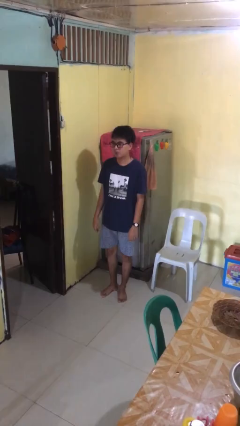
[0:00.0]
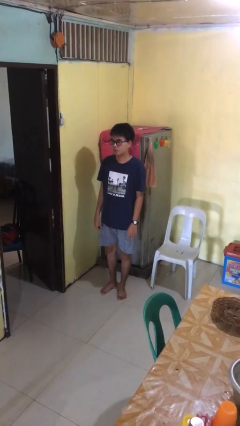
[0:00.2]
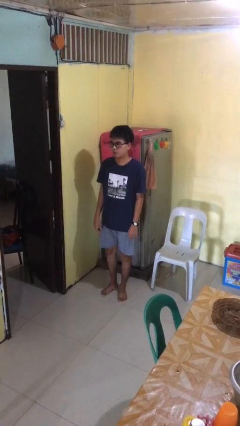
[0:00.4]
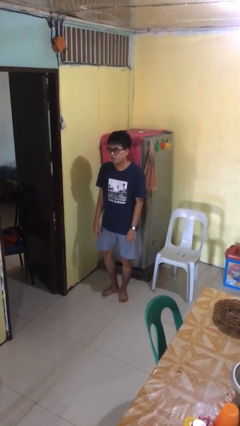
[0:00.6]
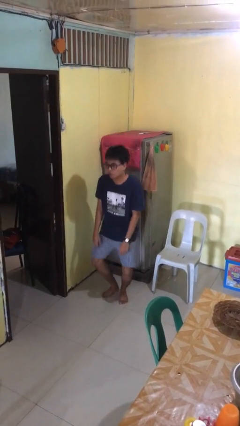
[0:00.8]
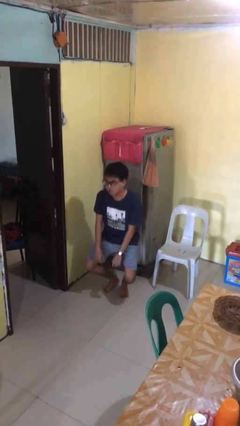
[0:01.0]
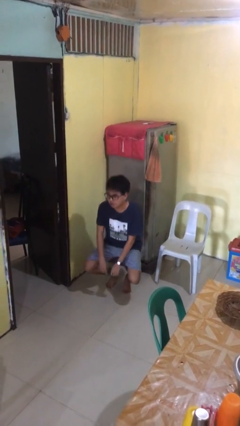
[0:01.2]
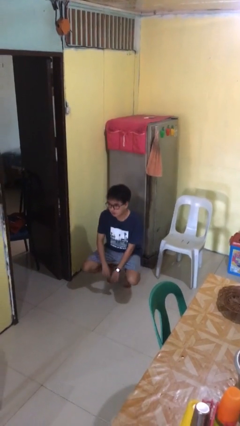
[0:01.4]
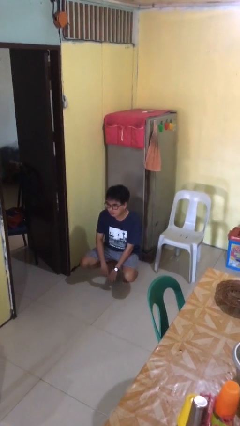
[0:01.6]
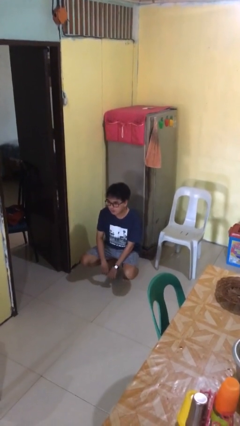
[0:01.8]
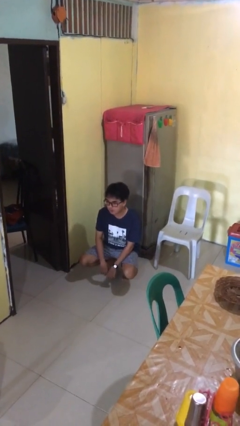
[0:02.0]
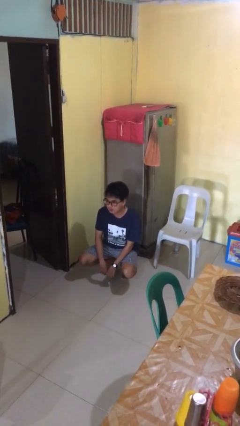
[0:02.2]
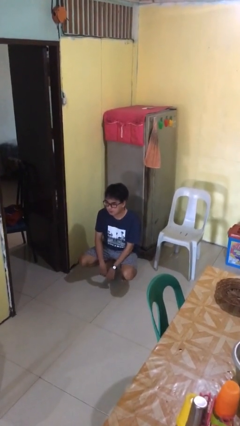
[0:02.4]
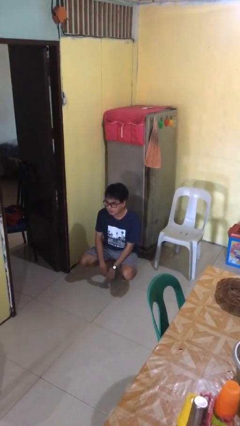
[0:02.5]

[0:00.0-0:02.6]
person squats

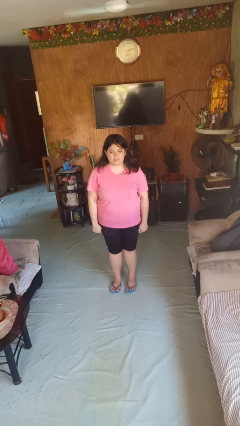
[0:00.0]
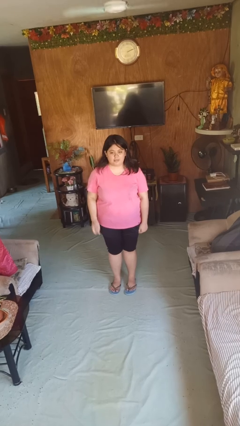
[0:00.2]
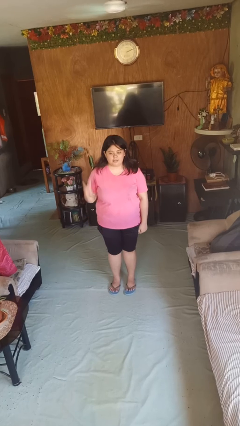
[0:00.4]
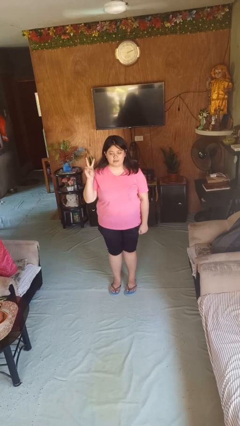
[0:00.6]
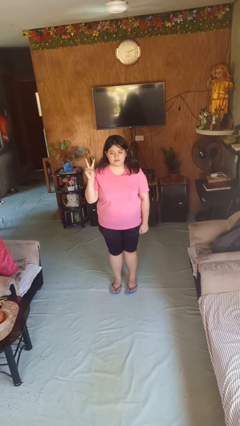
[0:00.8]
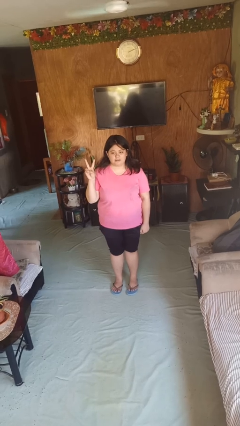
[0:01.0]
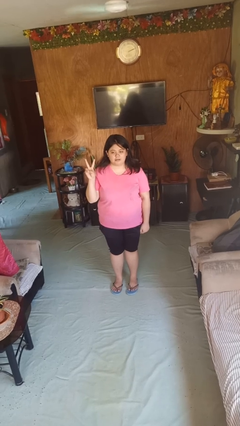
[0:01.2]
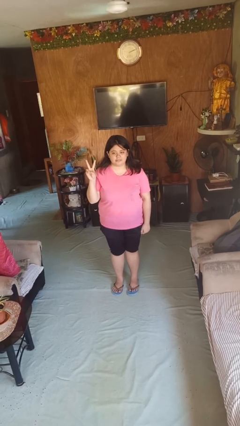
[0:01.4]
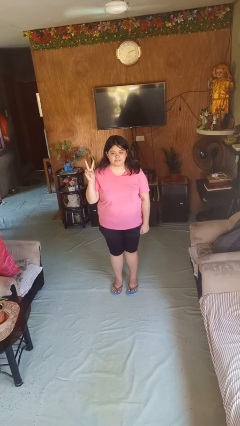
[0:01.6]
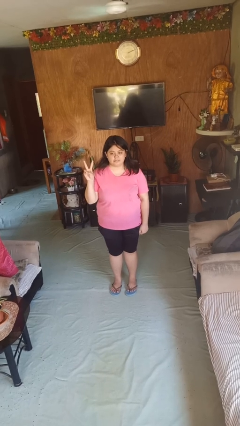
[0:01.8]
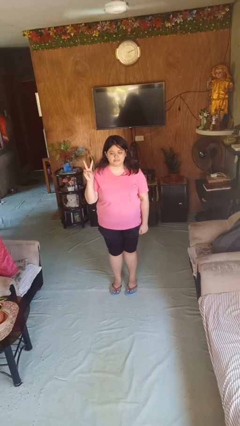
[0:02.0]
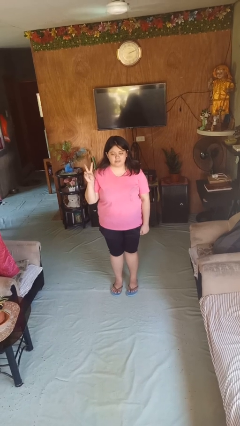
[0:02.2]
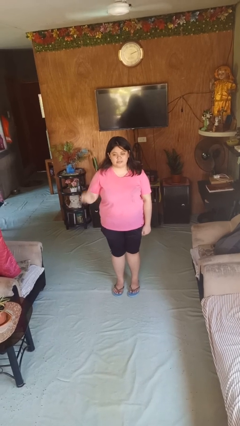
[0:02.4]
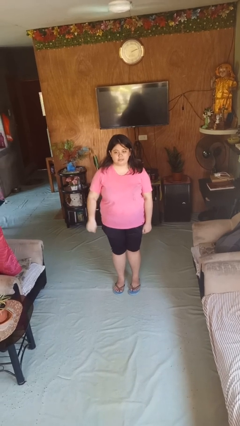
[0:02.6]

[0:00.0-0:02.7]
person gestures peace

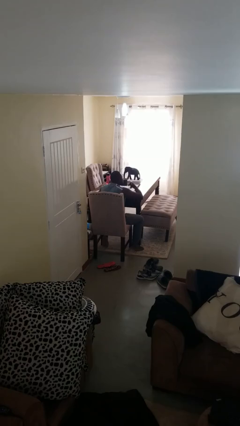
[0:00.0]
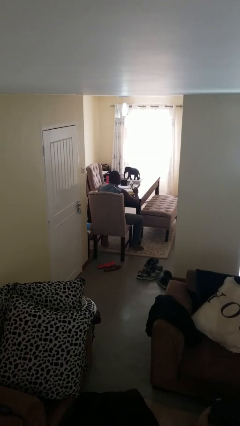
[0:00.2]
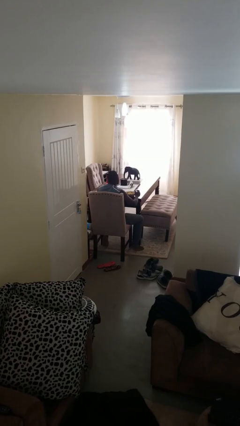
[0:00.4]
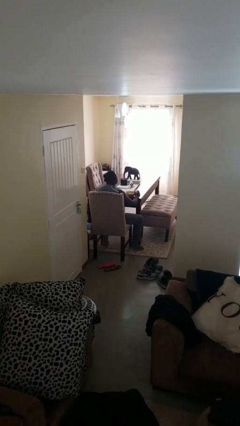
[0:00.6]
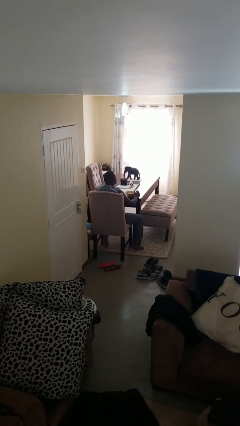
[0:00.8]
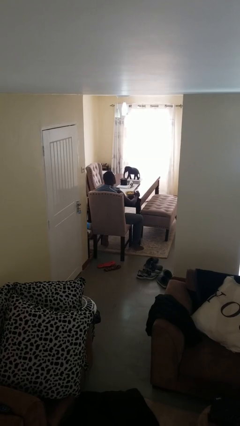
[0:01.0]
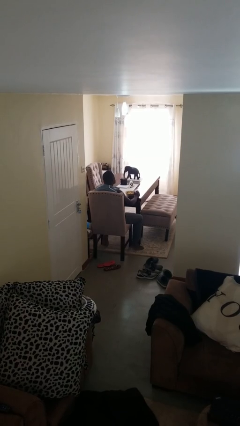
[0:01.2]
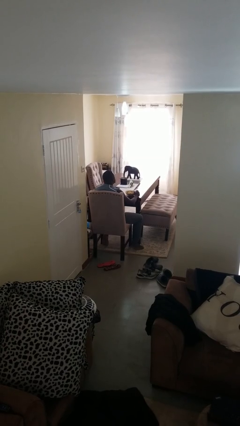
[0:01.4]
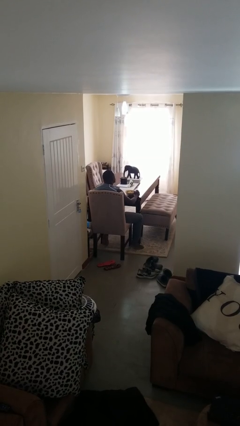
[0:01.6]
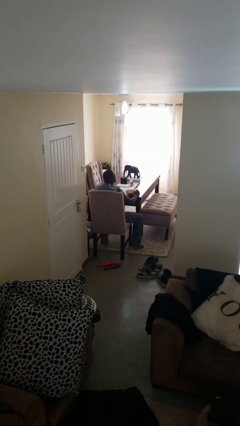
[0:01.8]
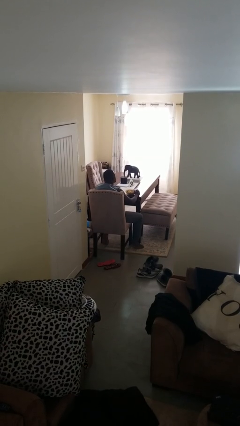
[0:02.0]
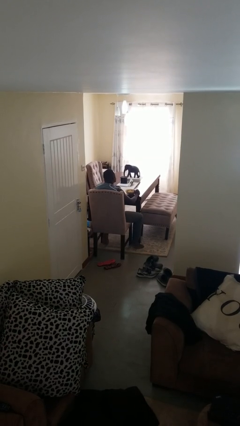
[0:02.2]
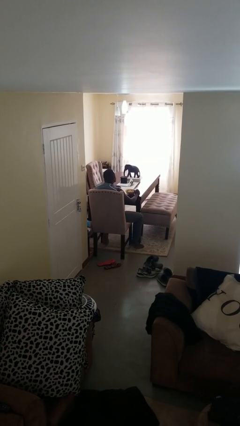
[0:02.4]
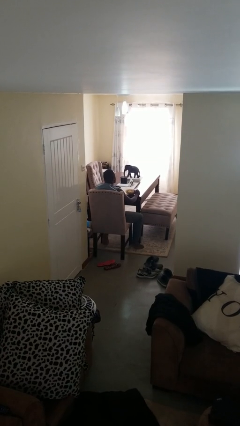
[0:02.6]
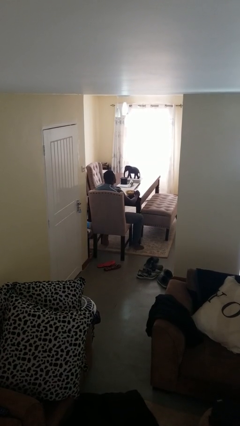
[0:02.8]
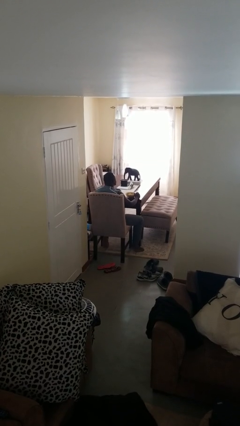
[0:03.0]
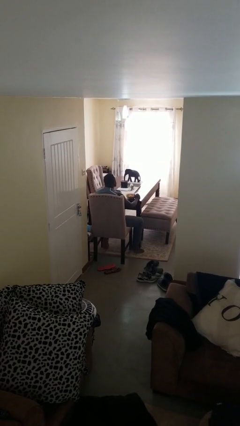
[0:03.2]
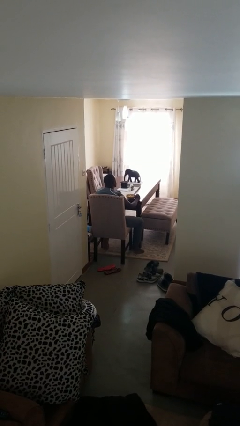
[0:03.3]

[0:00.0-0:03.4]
person eats with hands

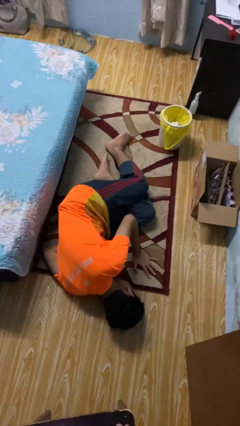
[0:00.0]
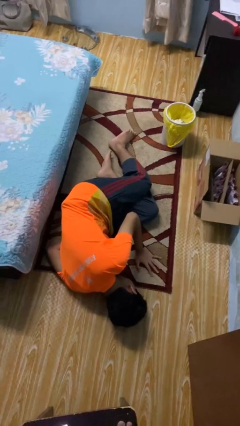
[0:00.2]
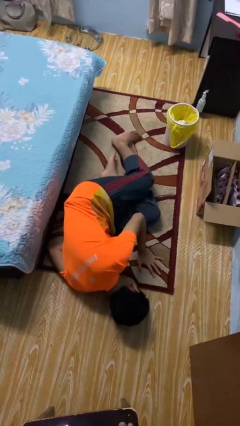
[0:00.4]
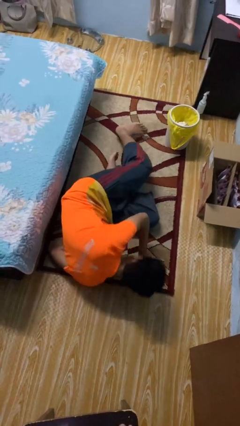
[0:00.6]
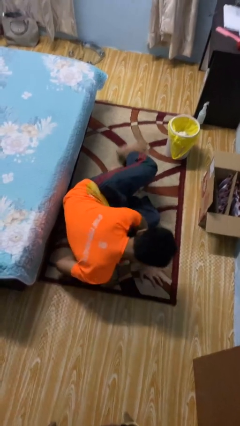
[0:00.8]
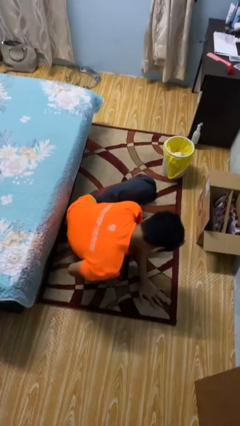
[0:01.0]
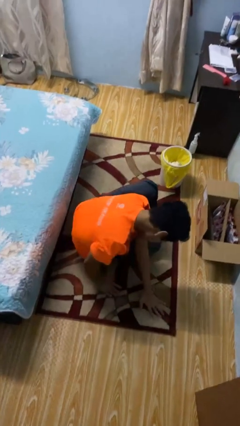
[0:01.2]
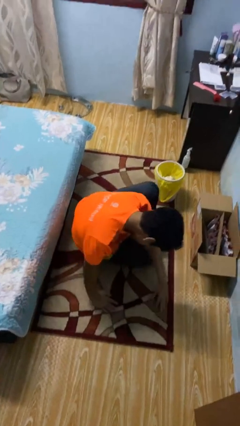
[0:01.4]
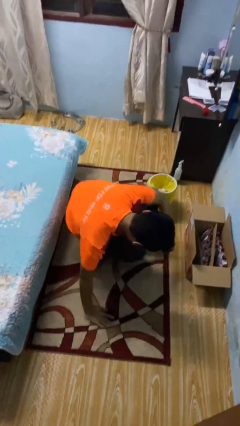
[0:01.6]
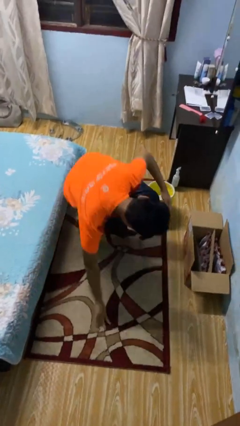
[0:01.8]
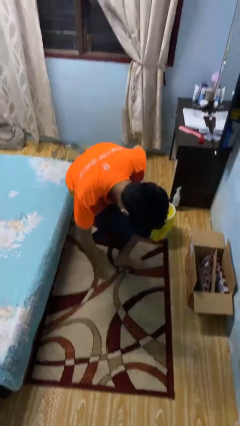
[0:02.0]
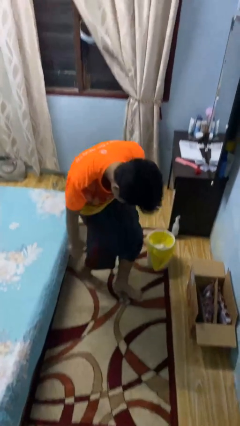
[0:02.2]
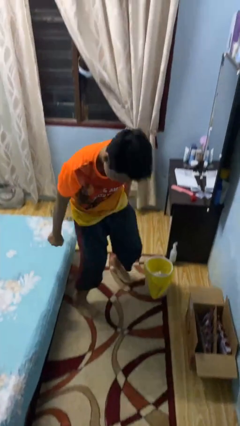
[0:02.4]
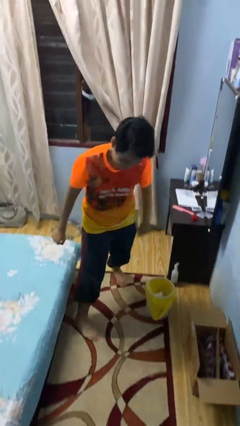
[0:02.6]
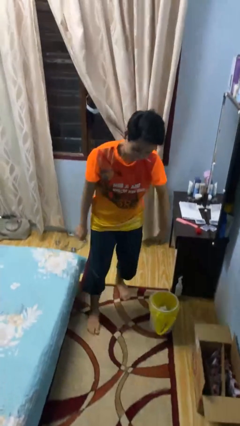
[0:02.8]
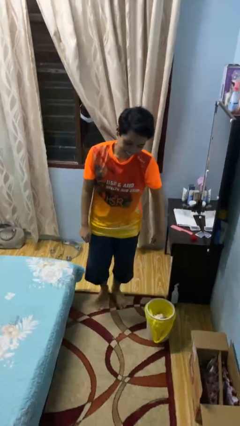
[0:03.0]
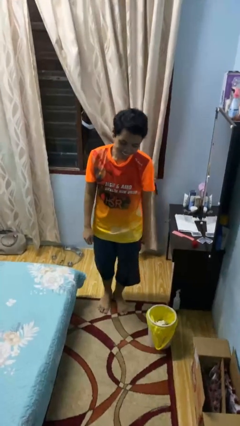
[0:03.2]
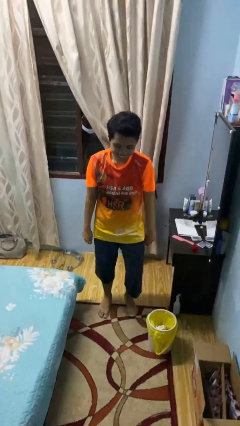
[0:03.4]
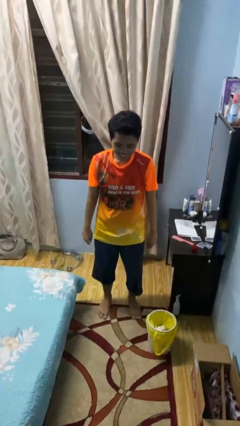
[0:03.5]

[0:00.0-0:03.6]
person stands up from floor

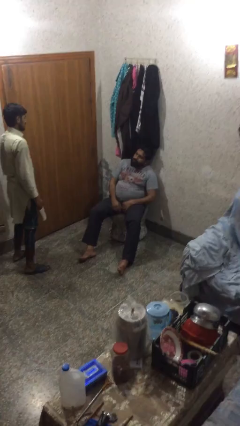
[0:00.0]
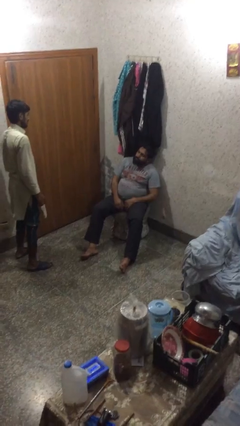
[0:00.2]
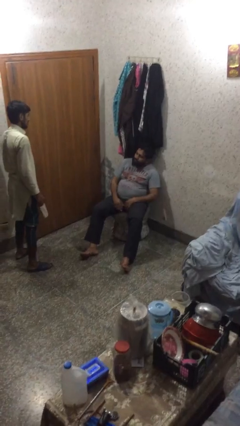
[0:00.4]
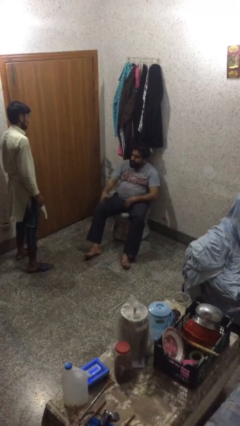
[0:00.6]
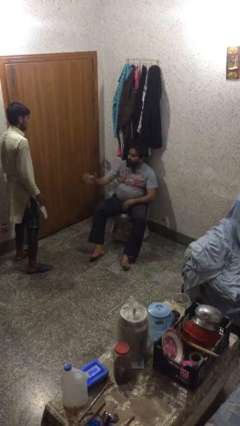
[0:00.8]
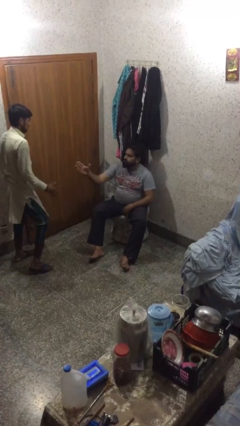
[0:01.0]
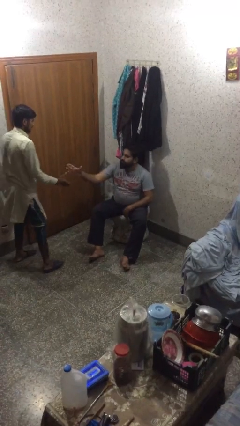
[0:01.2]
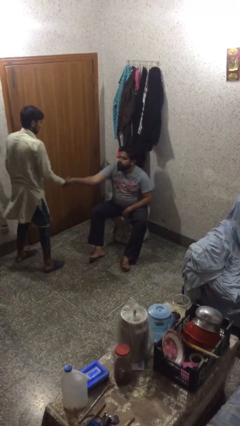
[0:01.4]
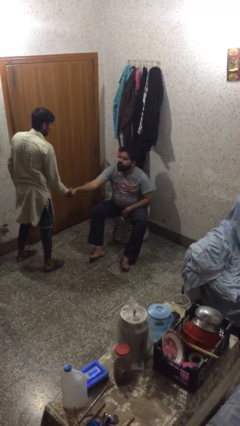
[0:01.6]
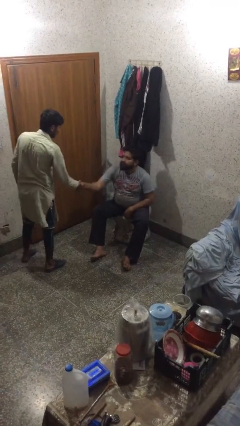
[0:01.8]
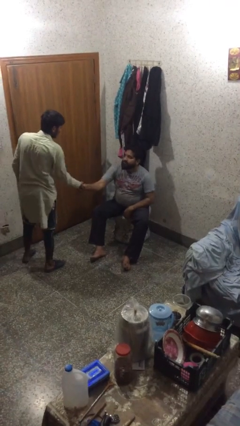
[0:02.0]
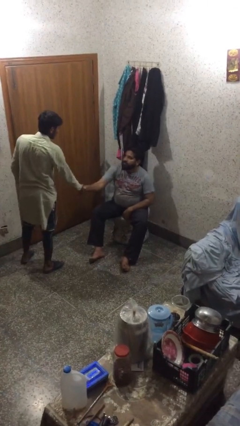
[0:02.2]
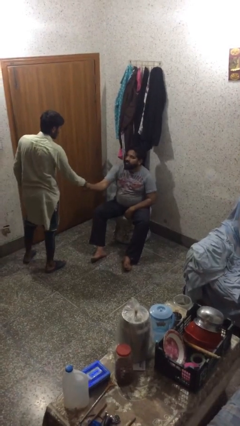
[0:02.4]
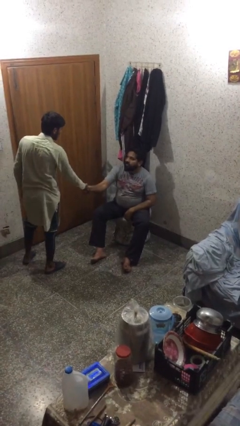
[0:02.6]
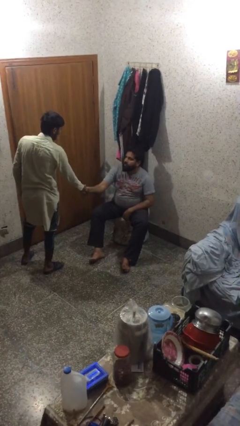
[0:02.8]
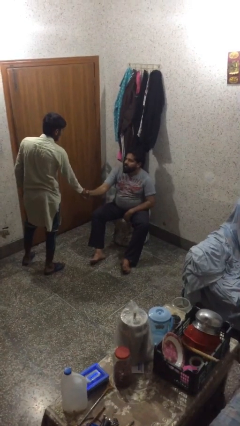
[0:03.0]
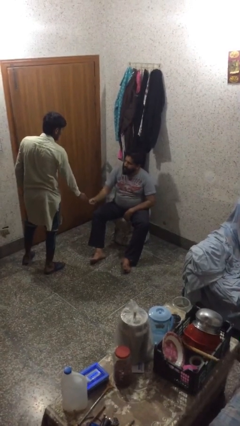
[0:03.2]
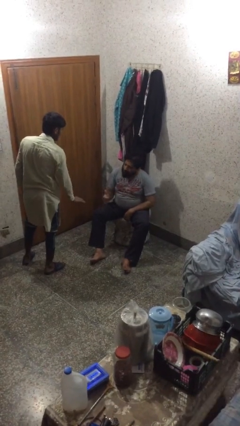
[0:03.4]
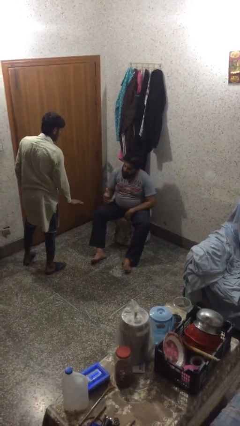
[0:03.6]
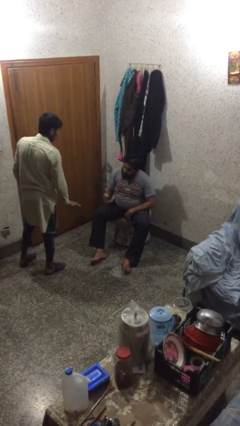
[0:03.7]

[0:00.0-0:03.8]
person shakes hand

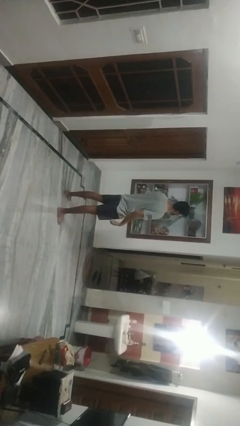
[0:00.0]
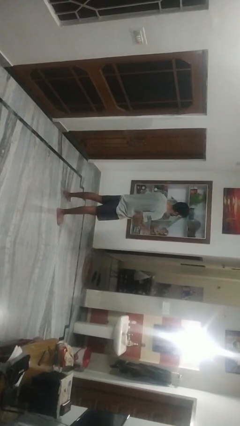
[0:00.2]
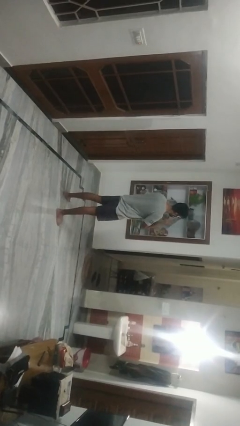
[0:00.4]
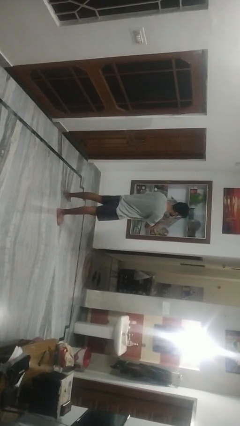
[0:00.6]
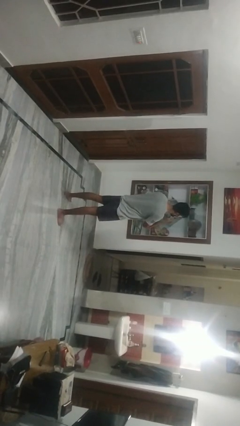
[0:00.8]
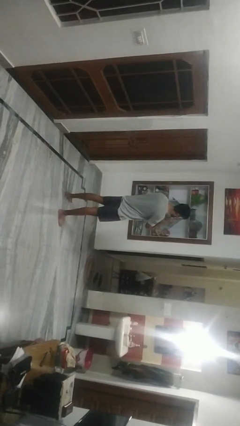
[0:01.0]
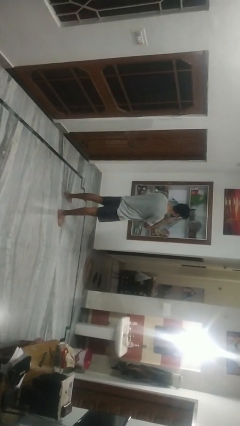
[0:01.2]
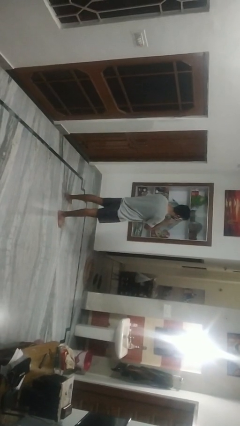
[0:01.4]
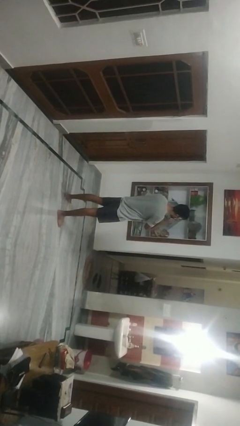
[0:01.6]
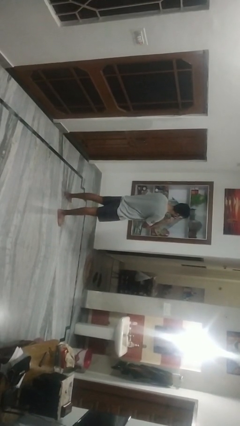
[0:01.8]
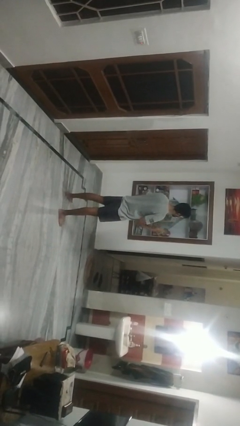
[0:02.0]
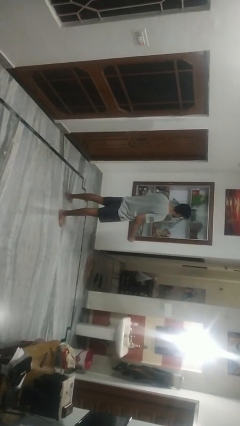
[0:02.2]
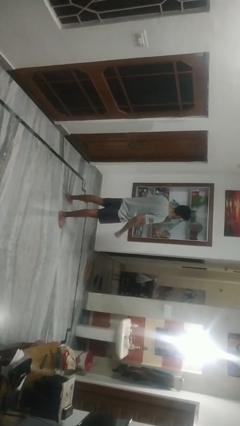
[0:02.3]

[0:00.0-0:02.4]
person scratches face
